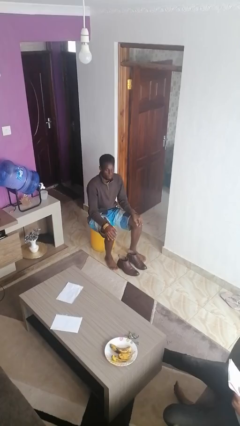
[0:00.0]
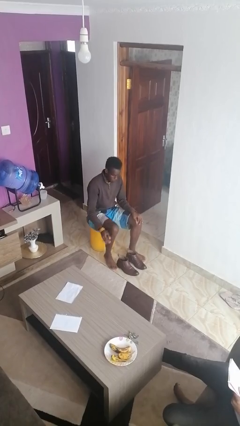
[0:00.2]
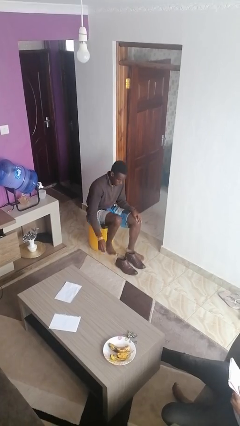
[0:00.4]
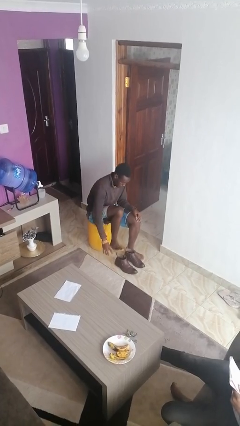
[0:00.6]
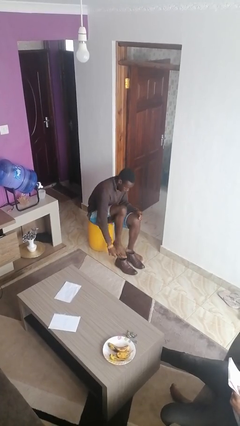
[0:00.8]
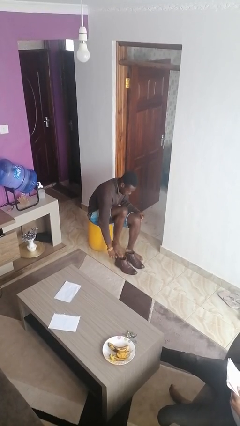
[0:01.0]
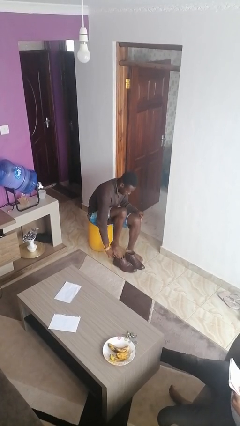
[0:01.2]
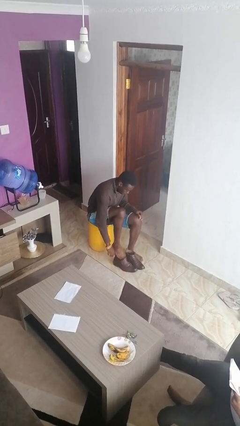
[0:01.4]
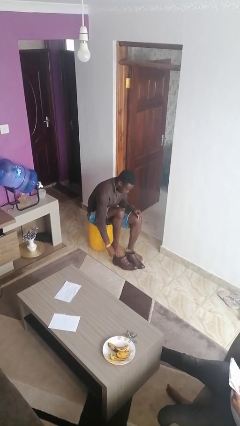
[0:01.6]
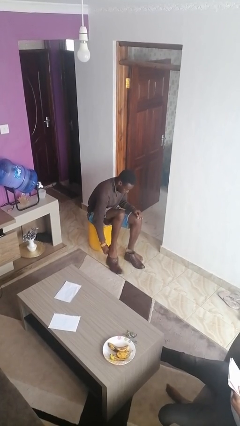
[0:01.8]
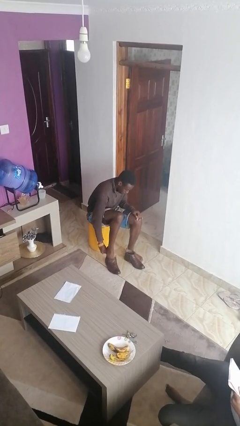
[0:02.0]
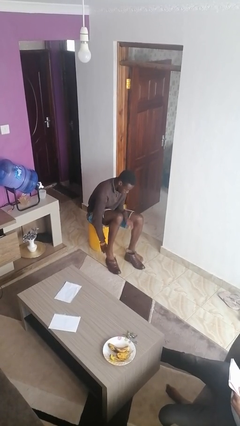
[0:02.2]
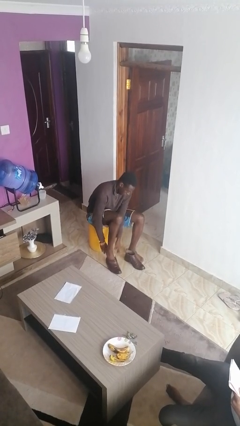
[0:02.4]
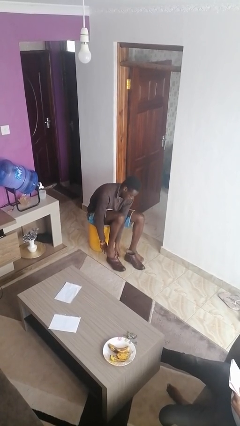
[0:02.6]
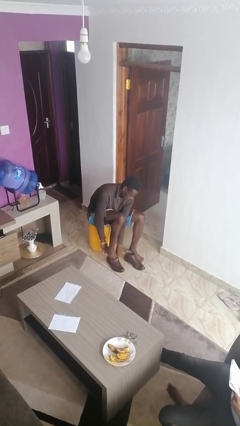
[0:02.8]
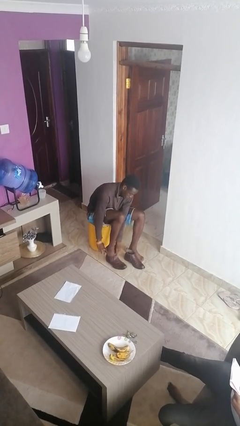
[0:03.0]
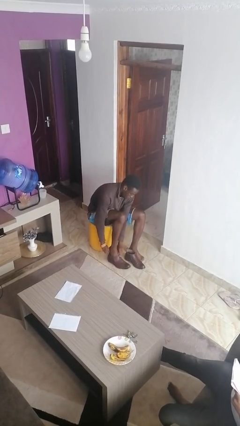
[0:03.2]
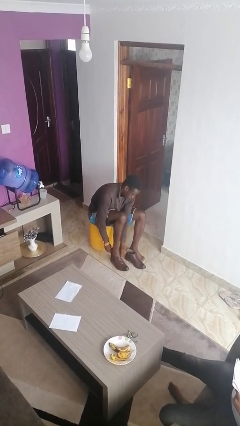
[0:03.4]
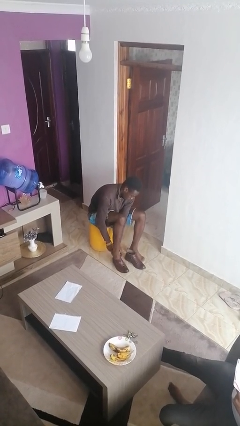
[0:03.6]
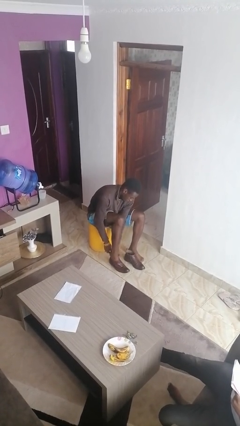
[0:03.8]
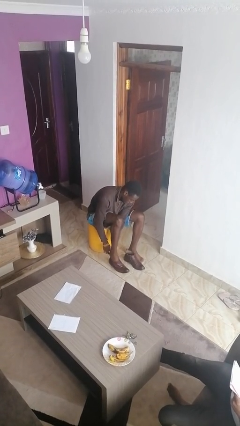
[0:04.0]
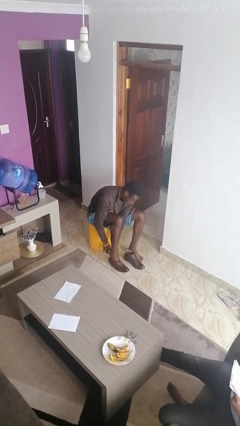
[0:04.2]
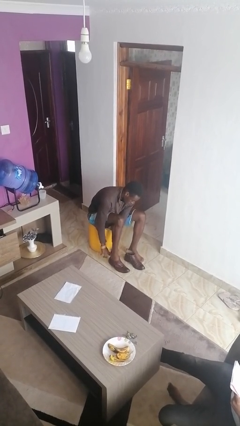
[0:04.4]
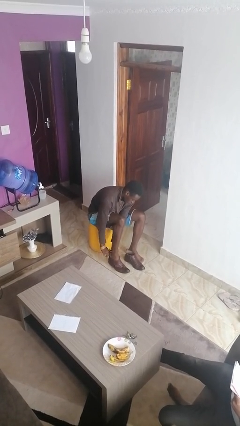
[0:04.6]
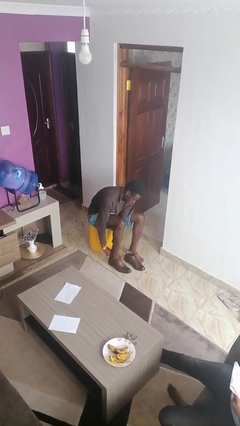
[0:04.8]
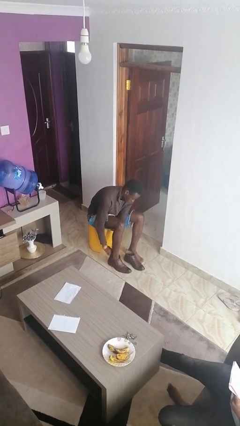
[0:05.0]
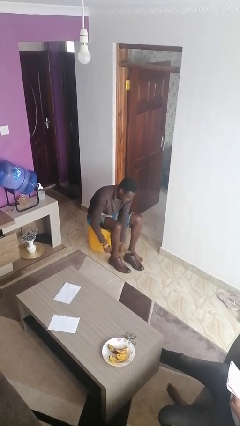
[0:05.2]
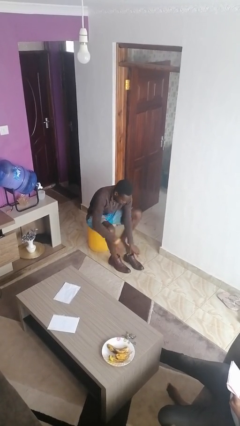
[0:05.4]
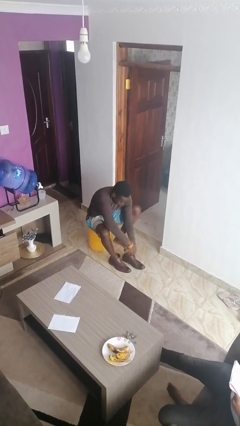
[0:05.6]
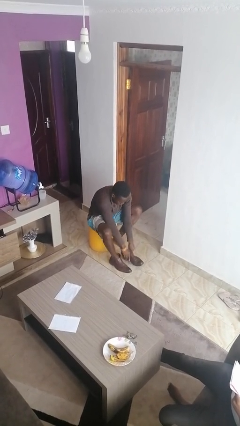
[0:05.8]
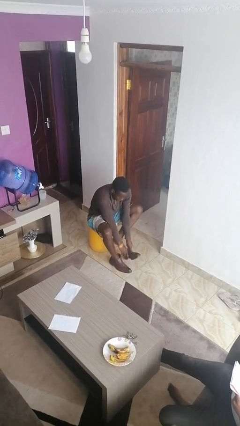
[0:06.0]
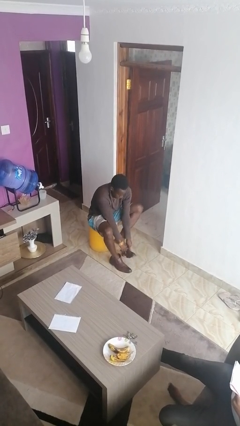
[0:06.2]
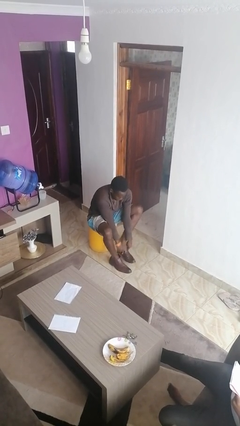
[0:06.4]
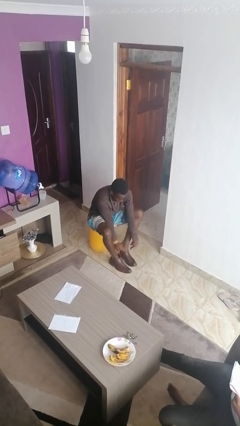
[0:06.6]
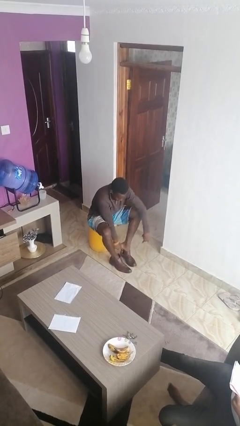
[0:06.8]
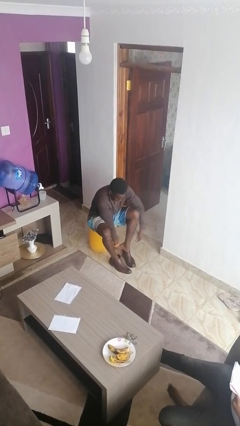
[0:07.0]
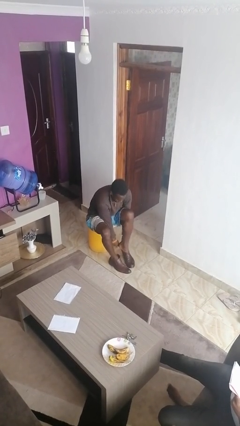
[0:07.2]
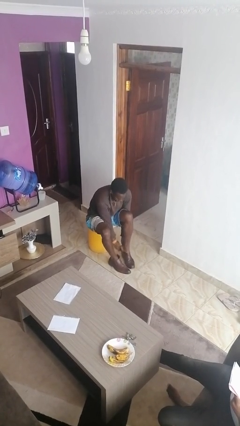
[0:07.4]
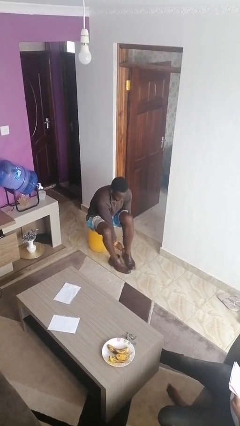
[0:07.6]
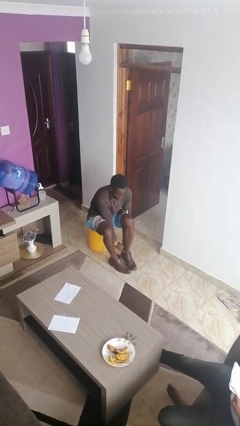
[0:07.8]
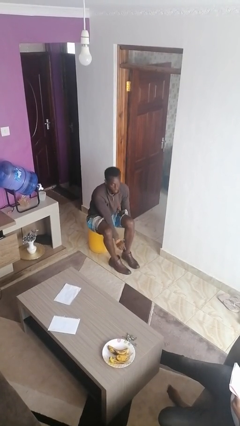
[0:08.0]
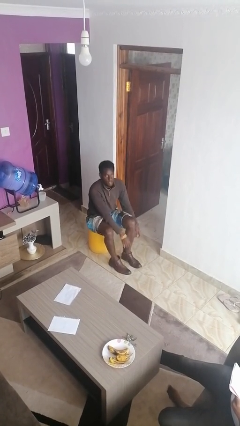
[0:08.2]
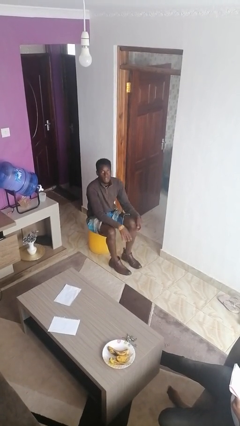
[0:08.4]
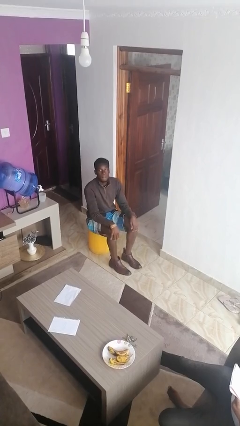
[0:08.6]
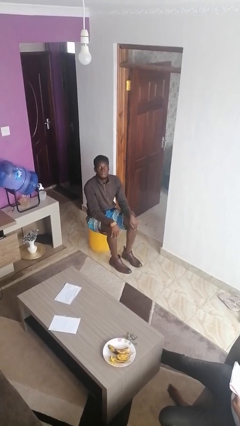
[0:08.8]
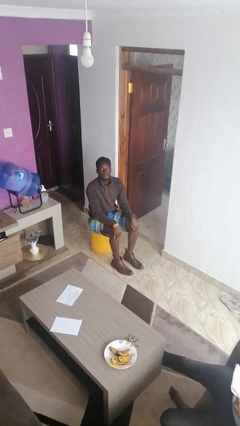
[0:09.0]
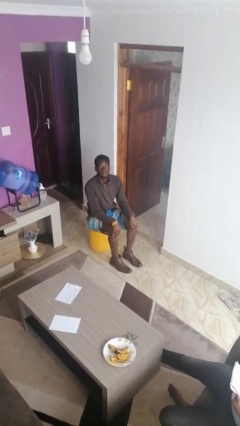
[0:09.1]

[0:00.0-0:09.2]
person puts on boots

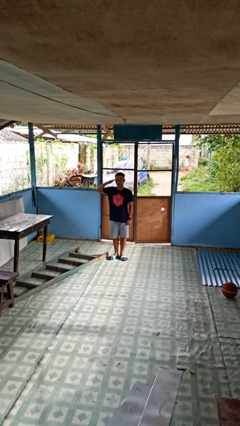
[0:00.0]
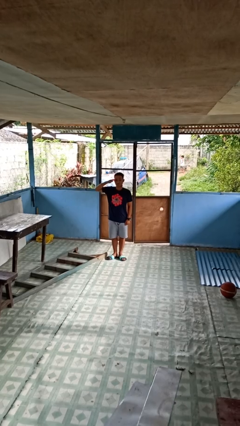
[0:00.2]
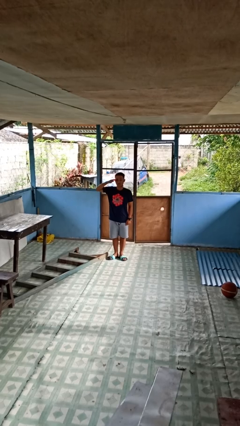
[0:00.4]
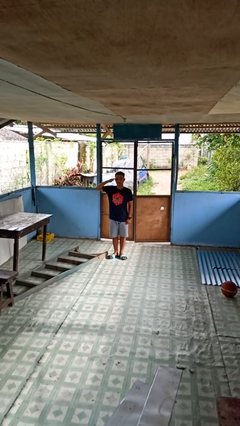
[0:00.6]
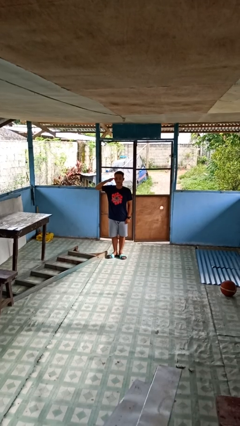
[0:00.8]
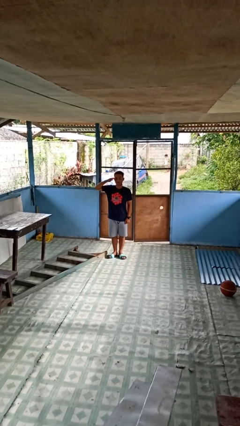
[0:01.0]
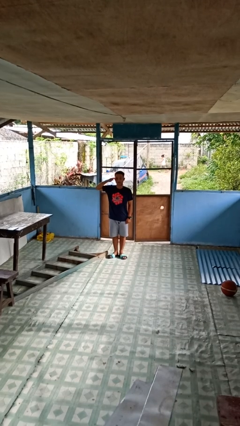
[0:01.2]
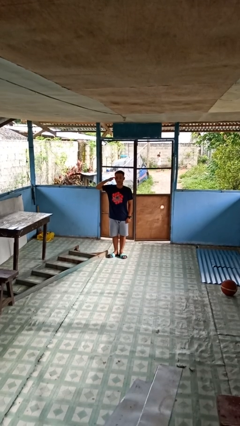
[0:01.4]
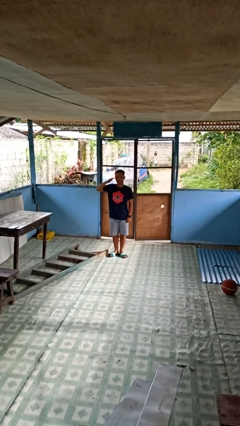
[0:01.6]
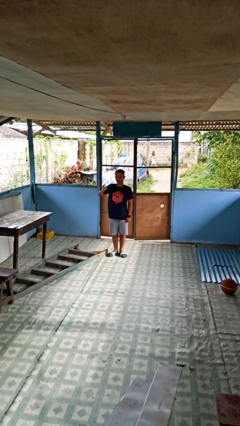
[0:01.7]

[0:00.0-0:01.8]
person salutes

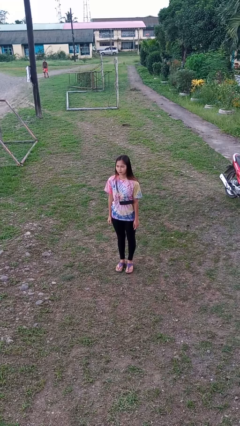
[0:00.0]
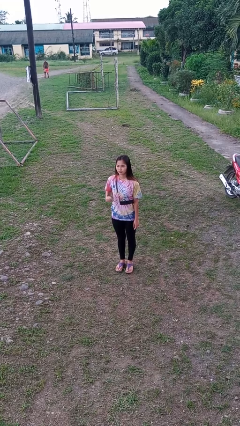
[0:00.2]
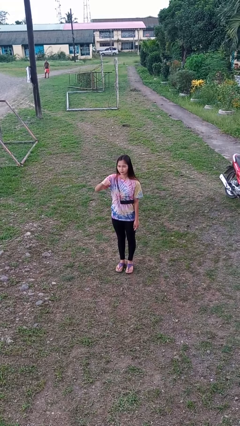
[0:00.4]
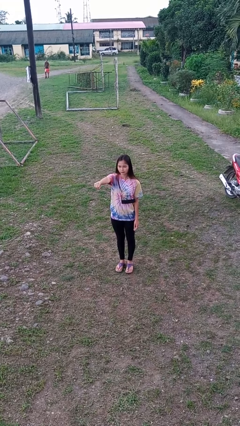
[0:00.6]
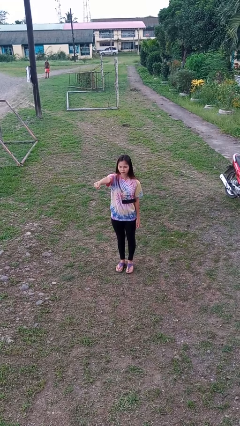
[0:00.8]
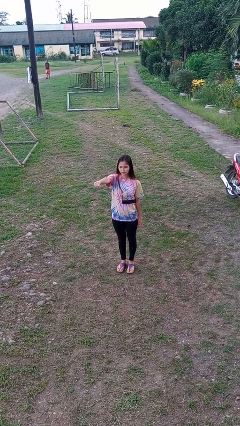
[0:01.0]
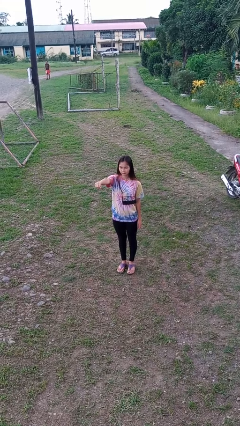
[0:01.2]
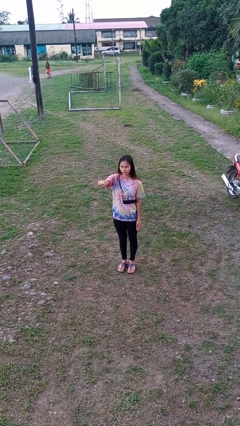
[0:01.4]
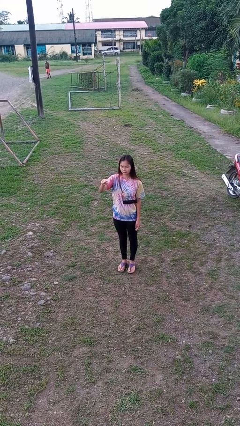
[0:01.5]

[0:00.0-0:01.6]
person punches

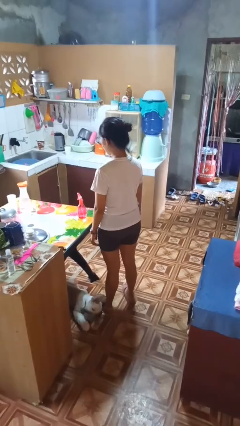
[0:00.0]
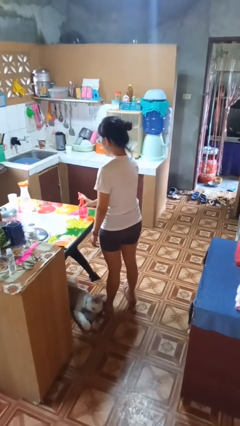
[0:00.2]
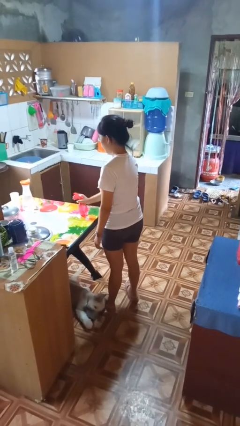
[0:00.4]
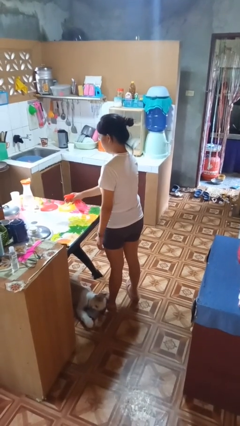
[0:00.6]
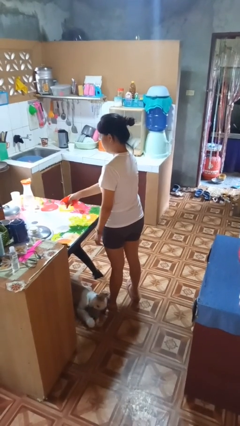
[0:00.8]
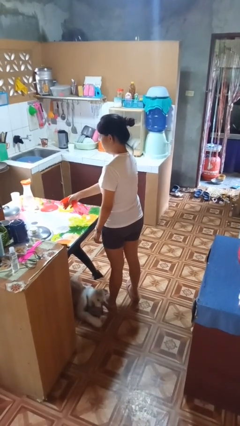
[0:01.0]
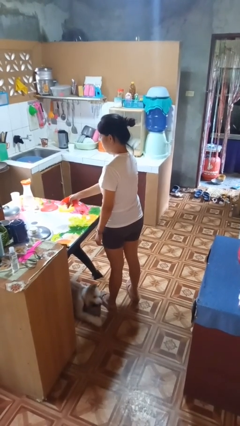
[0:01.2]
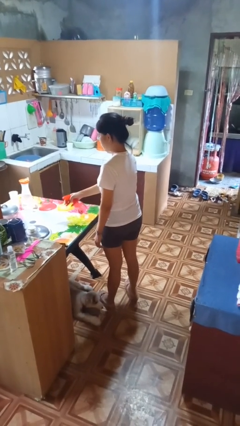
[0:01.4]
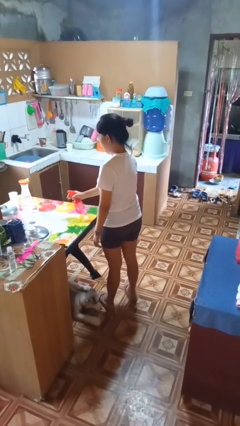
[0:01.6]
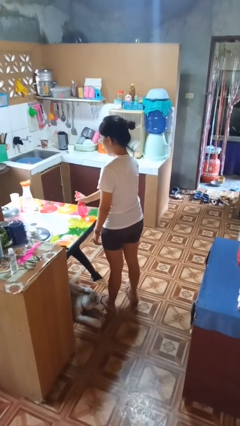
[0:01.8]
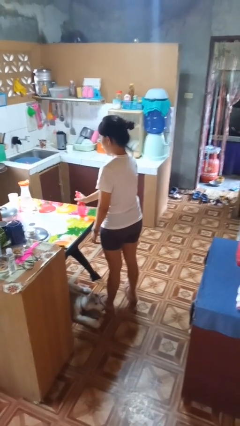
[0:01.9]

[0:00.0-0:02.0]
person sprays from bottle

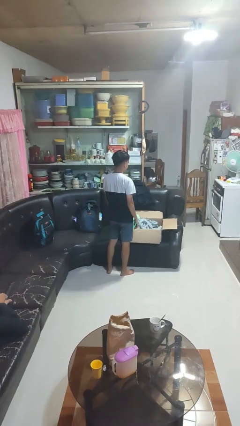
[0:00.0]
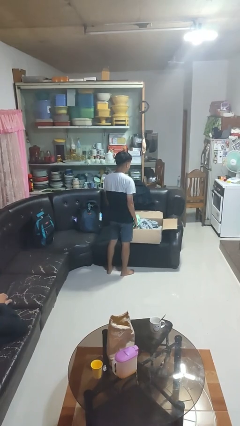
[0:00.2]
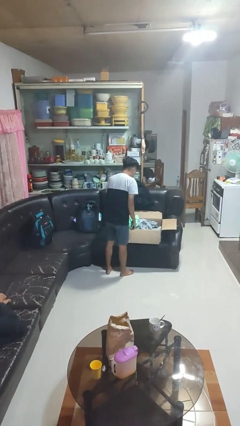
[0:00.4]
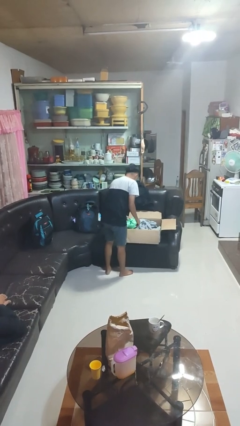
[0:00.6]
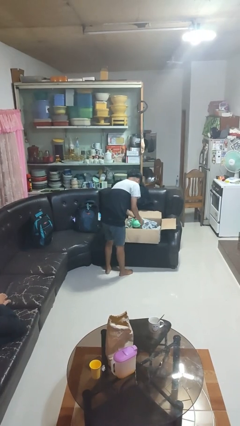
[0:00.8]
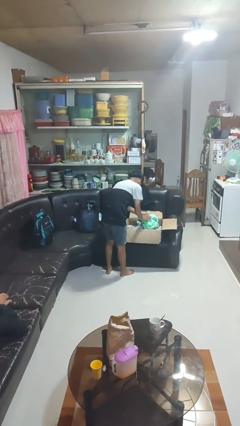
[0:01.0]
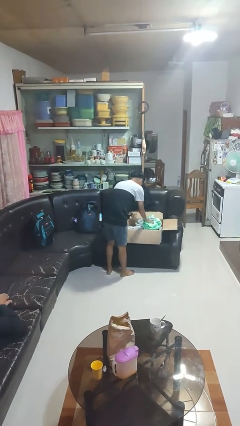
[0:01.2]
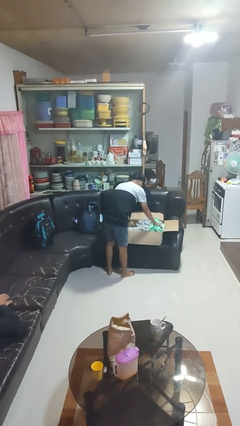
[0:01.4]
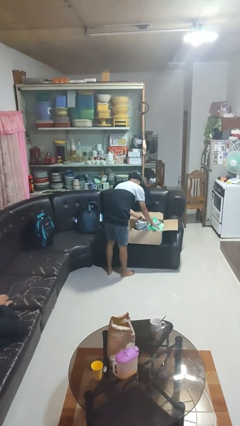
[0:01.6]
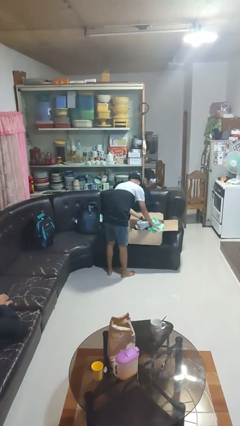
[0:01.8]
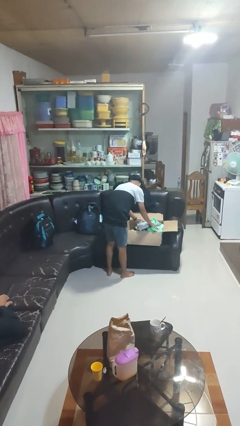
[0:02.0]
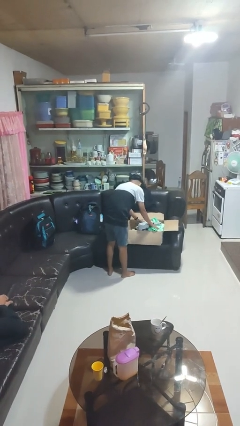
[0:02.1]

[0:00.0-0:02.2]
person searches in box

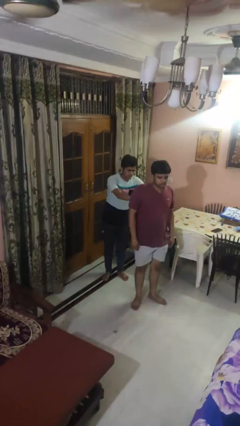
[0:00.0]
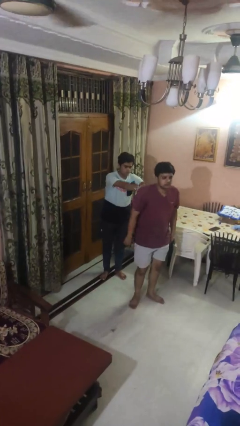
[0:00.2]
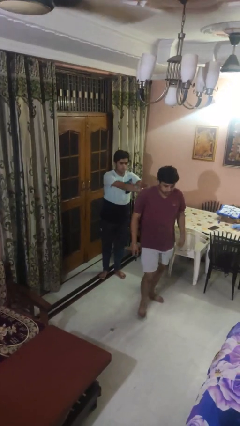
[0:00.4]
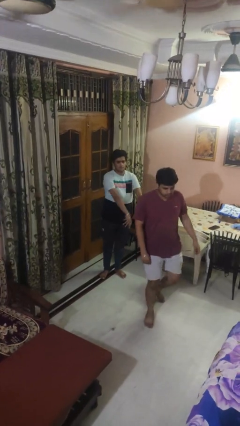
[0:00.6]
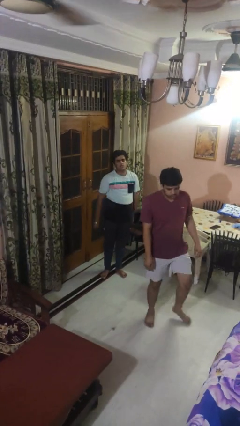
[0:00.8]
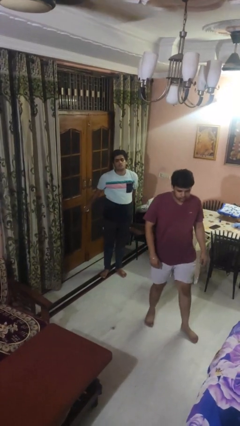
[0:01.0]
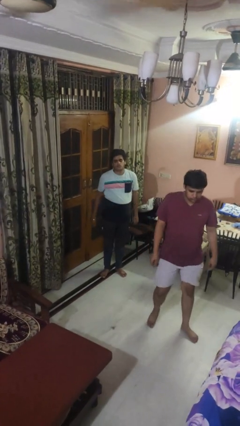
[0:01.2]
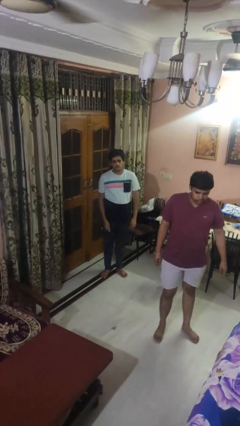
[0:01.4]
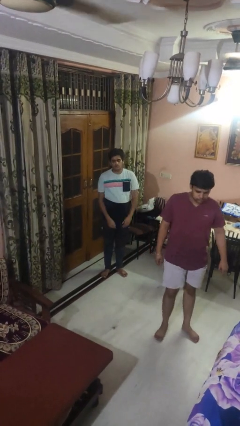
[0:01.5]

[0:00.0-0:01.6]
person shoves person
